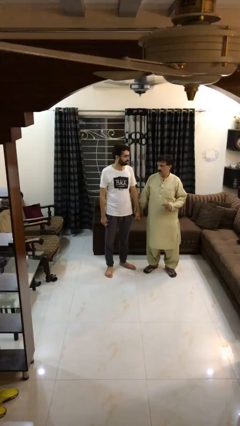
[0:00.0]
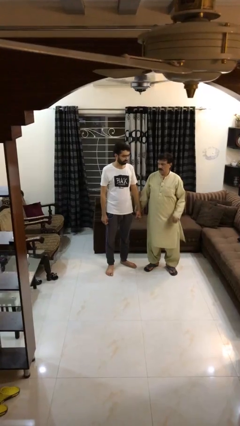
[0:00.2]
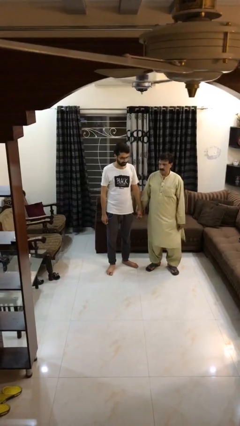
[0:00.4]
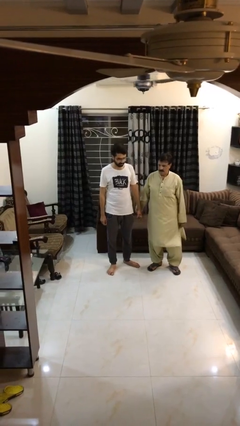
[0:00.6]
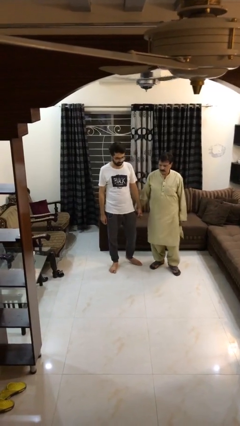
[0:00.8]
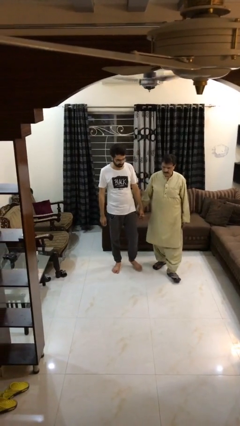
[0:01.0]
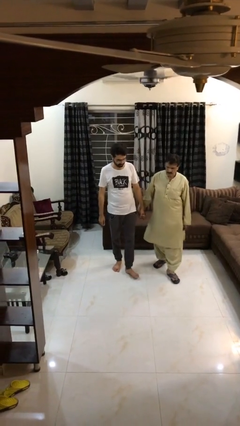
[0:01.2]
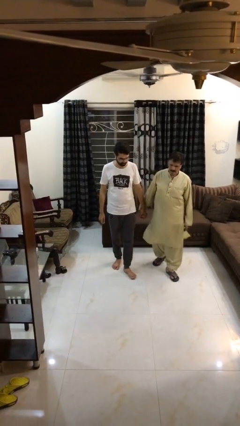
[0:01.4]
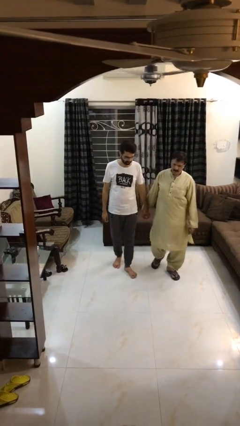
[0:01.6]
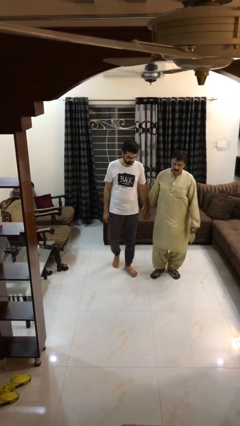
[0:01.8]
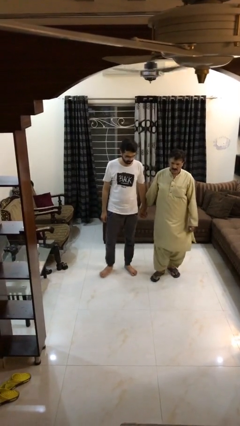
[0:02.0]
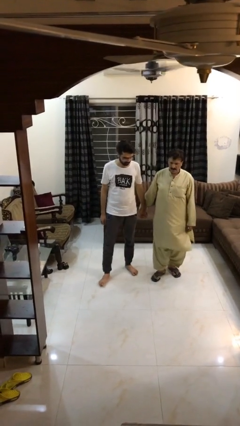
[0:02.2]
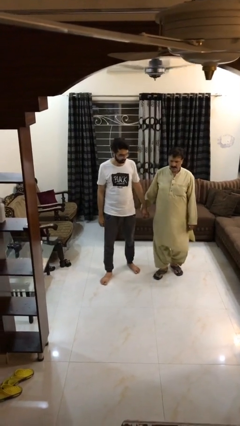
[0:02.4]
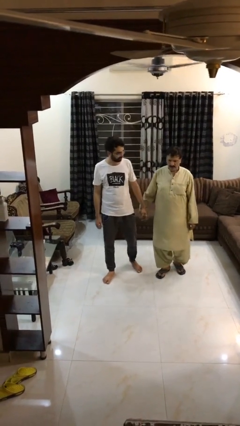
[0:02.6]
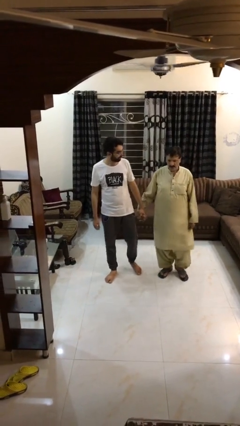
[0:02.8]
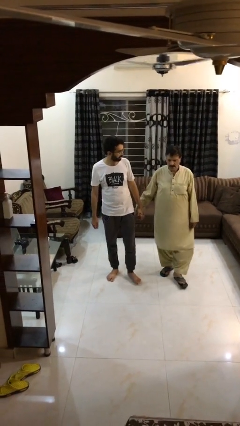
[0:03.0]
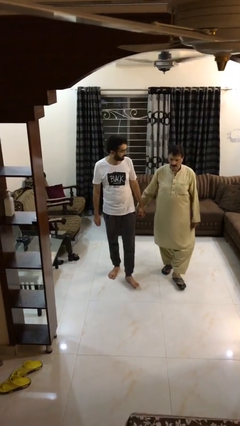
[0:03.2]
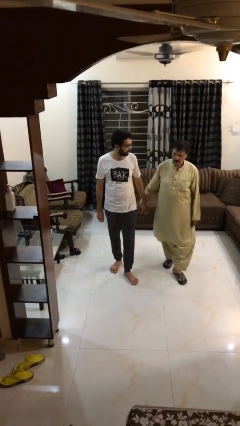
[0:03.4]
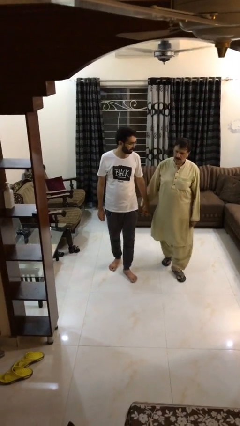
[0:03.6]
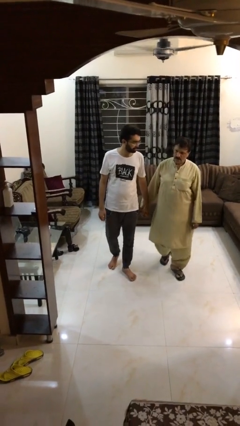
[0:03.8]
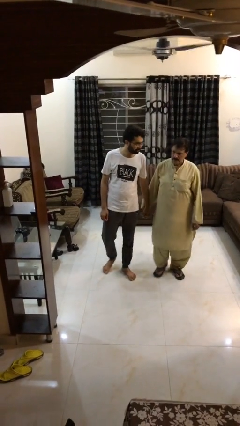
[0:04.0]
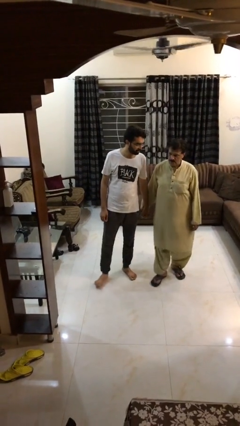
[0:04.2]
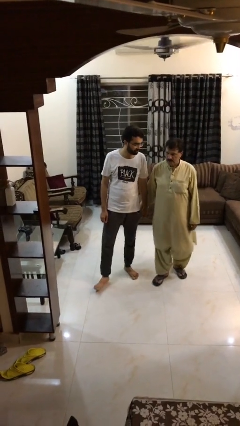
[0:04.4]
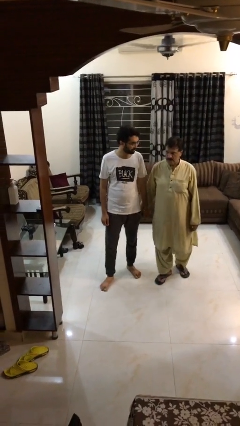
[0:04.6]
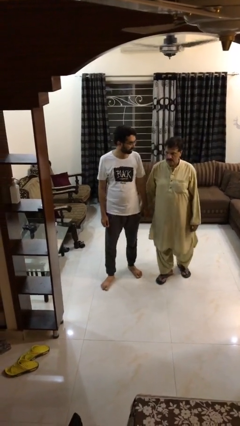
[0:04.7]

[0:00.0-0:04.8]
person holds hand

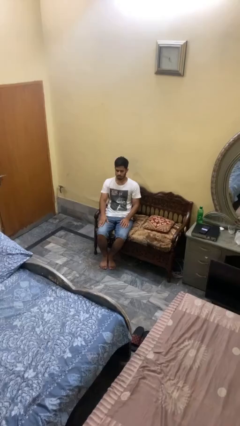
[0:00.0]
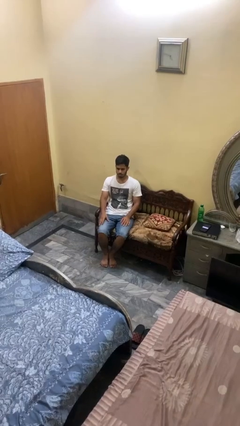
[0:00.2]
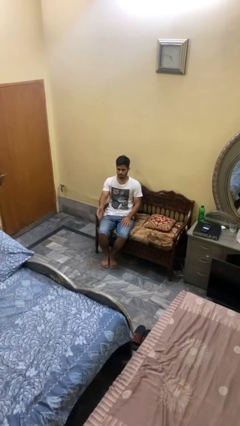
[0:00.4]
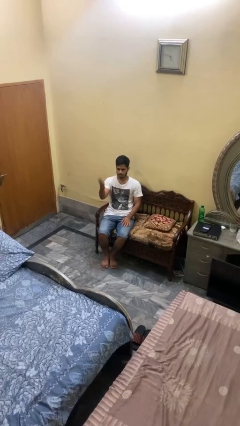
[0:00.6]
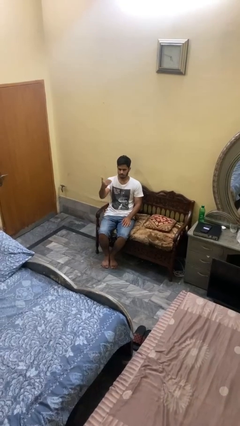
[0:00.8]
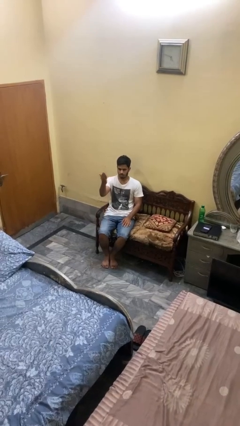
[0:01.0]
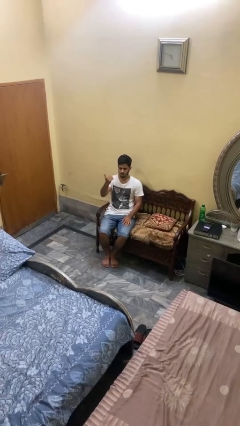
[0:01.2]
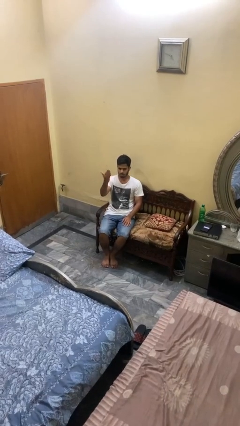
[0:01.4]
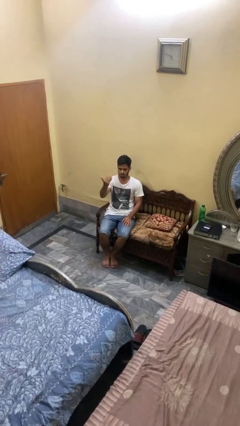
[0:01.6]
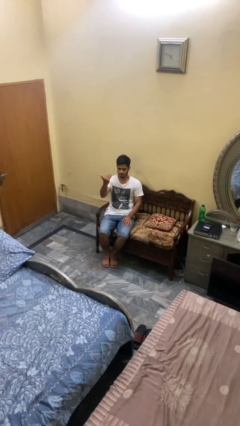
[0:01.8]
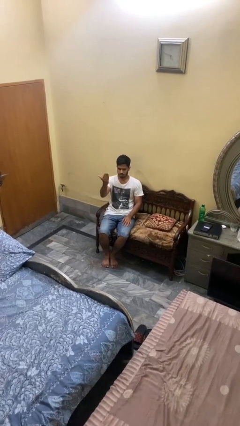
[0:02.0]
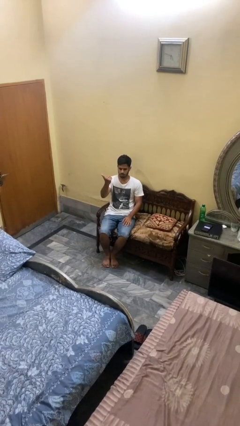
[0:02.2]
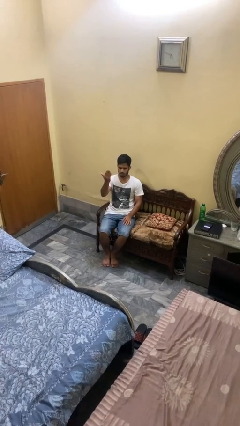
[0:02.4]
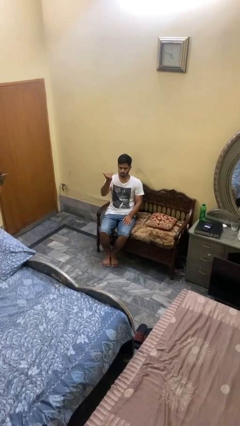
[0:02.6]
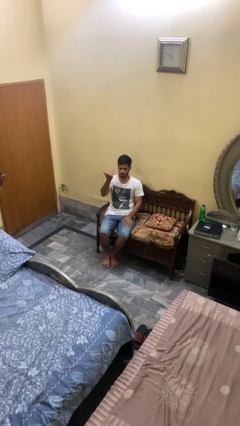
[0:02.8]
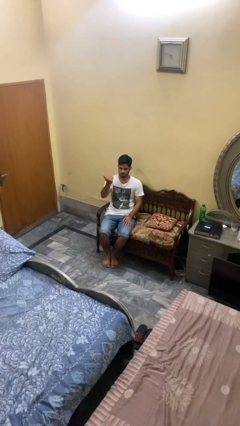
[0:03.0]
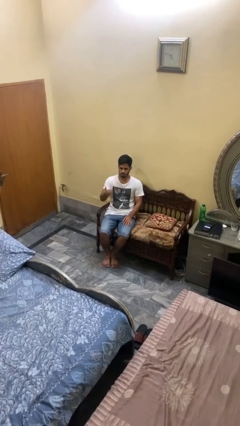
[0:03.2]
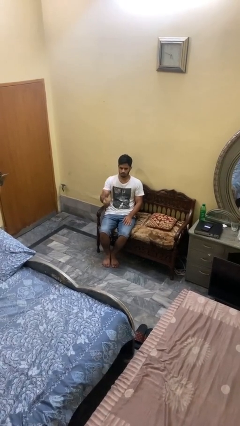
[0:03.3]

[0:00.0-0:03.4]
person gestures come here

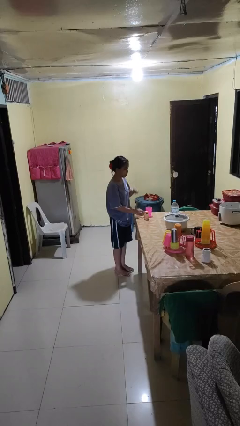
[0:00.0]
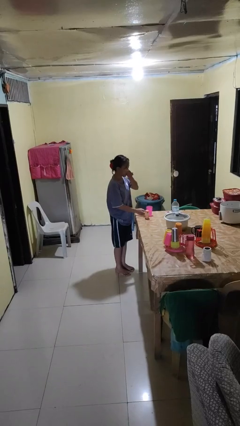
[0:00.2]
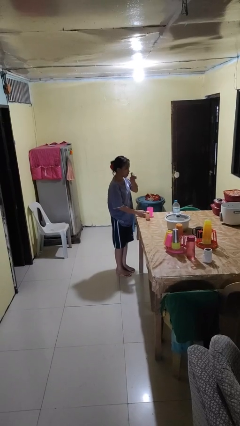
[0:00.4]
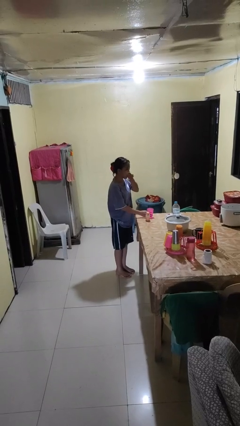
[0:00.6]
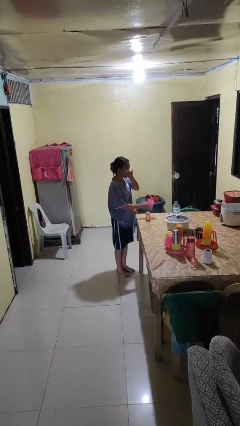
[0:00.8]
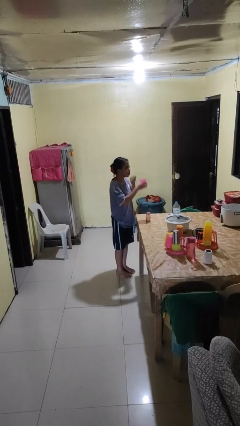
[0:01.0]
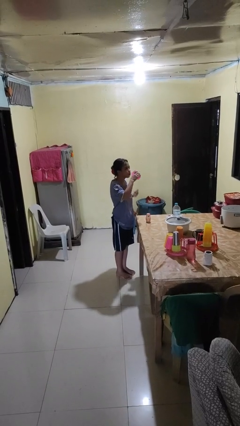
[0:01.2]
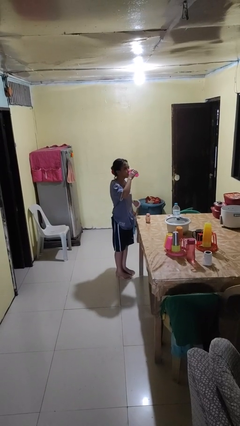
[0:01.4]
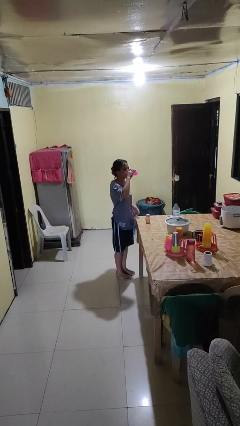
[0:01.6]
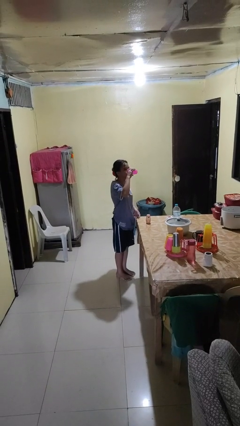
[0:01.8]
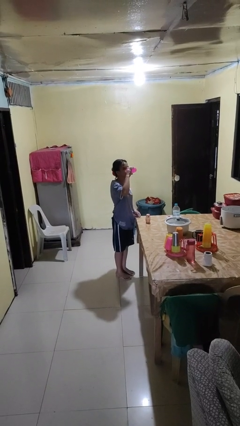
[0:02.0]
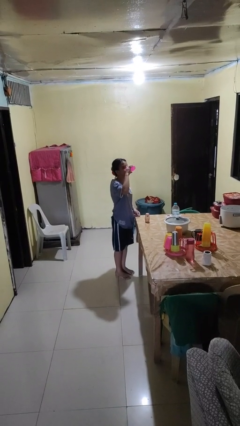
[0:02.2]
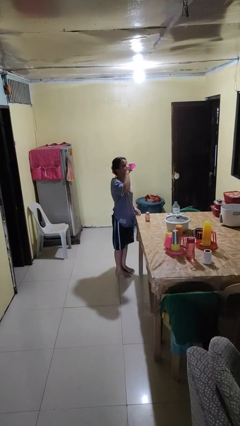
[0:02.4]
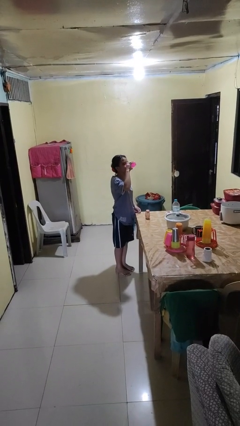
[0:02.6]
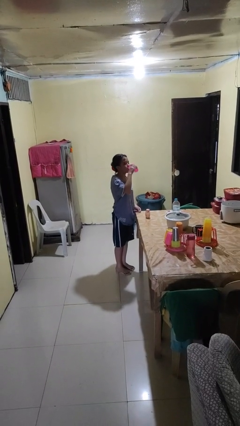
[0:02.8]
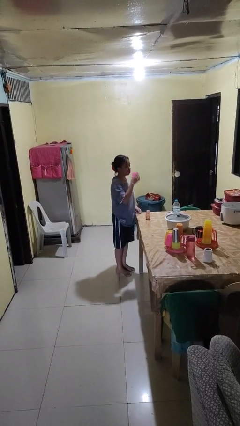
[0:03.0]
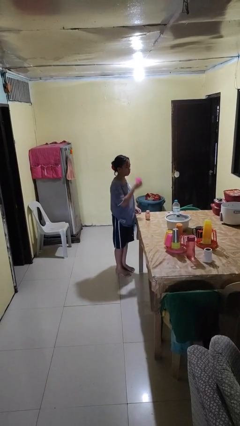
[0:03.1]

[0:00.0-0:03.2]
person drinks from cup

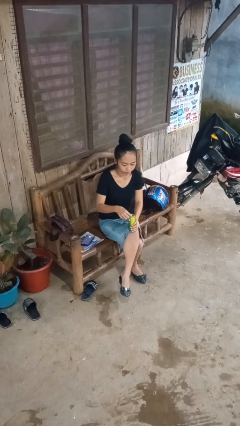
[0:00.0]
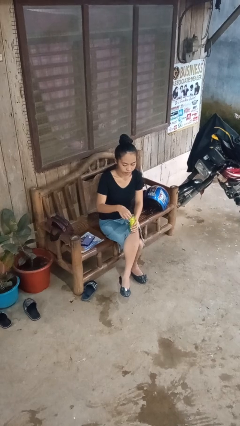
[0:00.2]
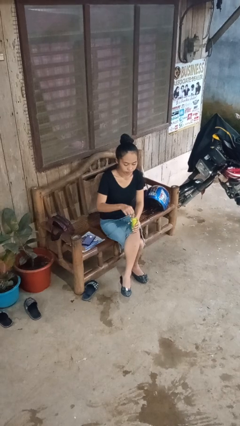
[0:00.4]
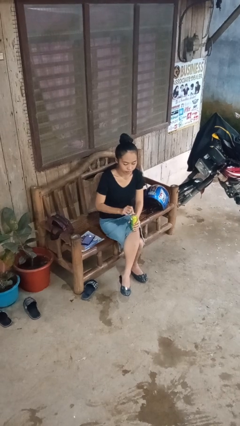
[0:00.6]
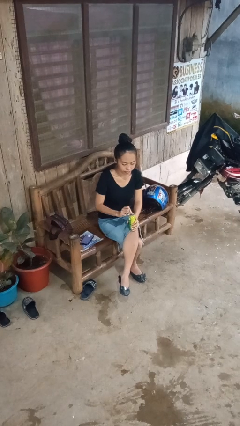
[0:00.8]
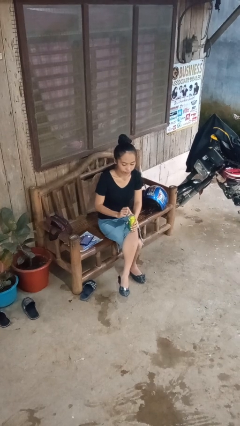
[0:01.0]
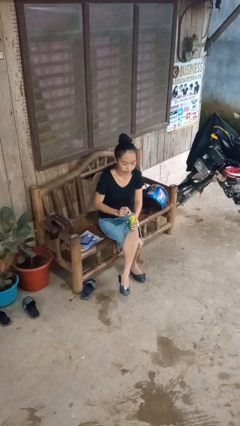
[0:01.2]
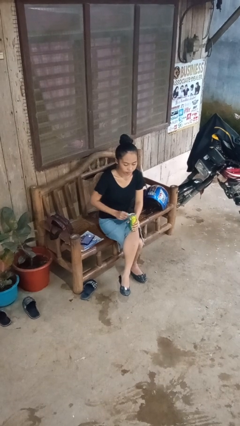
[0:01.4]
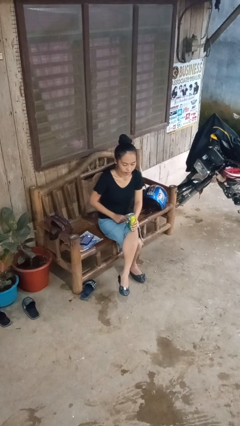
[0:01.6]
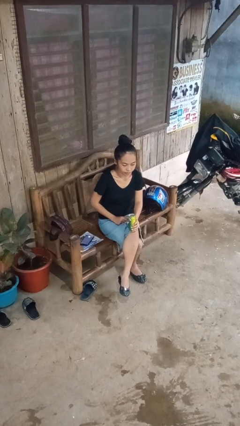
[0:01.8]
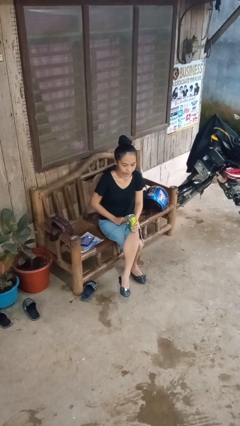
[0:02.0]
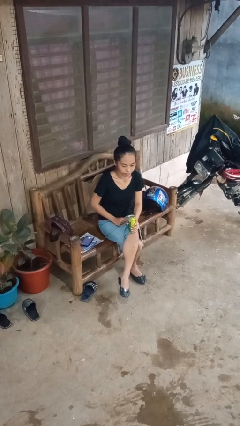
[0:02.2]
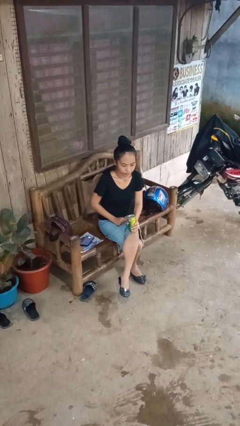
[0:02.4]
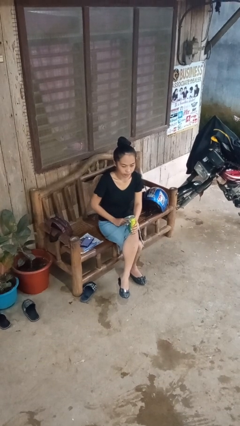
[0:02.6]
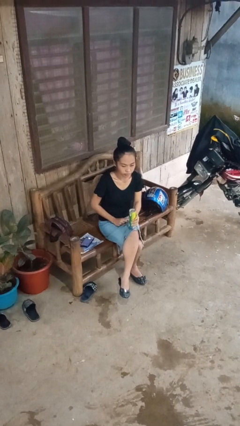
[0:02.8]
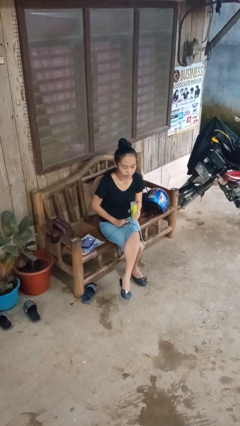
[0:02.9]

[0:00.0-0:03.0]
person opens beverage can

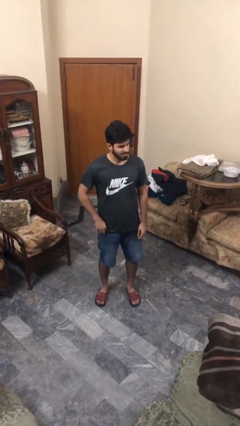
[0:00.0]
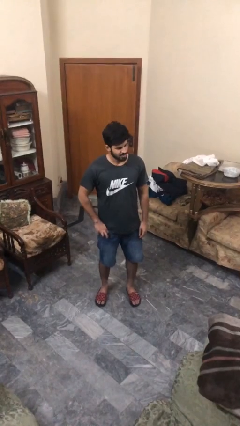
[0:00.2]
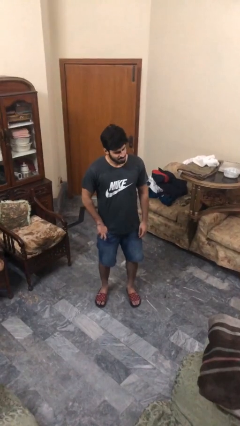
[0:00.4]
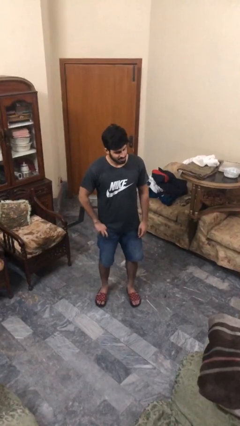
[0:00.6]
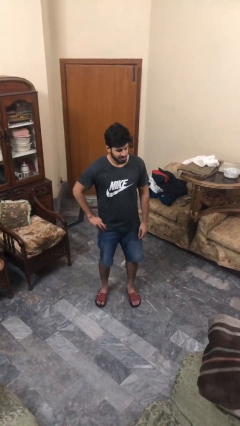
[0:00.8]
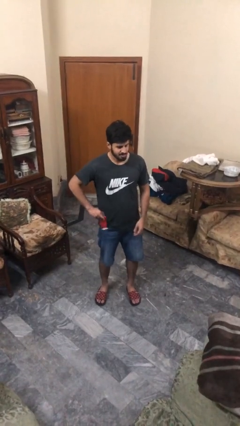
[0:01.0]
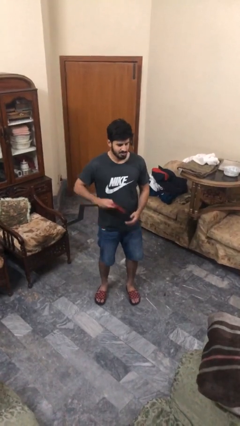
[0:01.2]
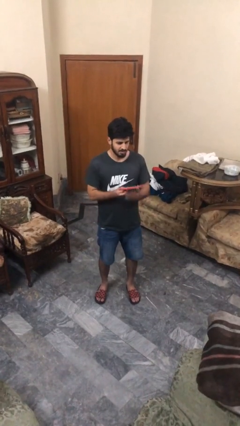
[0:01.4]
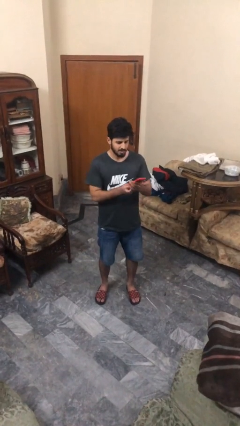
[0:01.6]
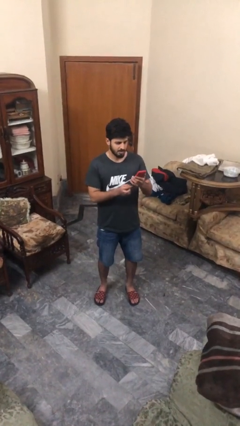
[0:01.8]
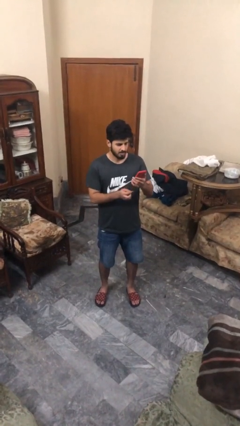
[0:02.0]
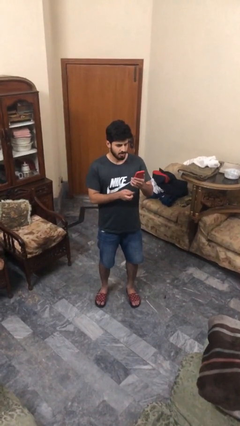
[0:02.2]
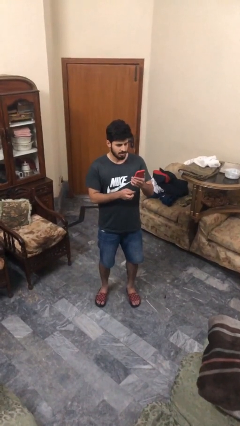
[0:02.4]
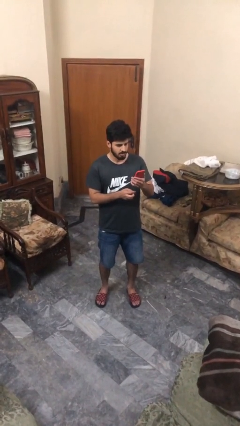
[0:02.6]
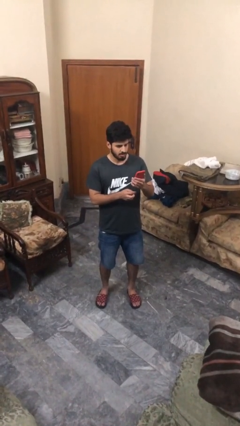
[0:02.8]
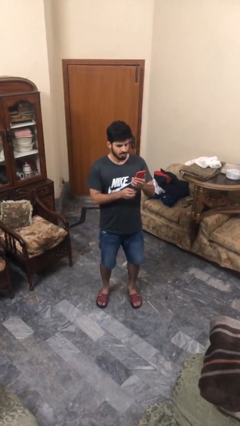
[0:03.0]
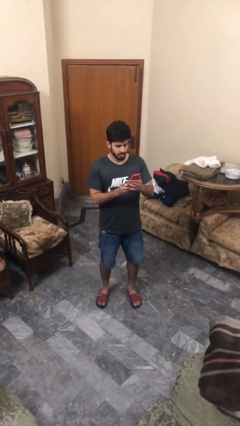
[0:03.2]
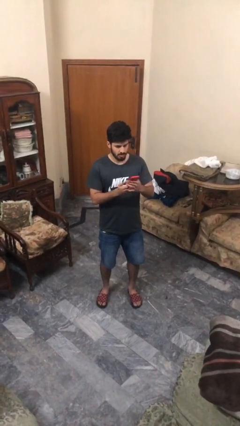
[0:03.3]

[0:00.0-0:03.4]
person takes phone from pocket
